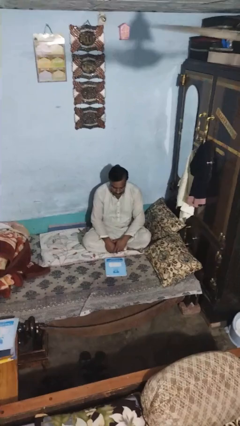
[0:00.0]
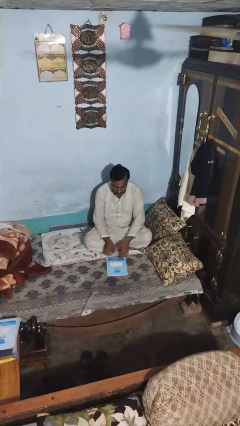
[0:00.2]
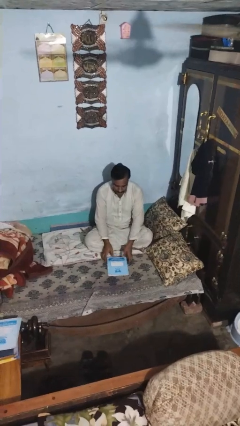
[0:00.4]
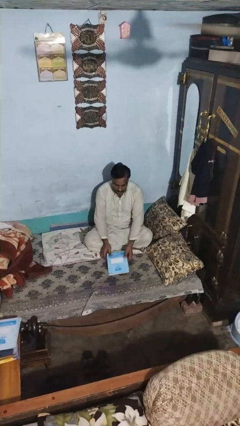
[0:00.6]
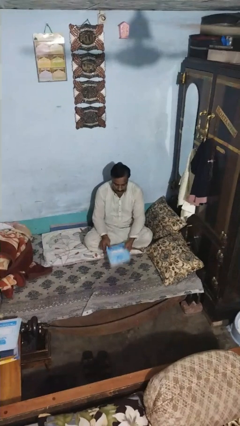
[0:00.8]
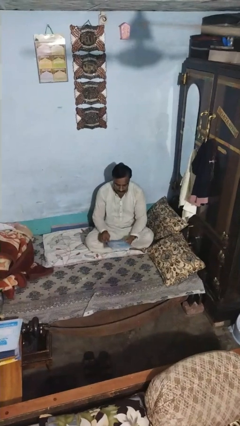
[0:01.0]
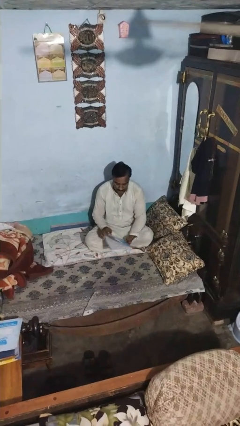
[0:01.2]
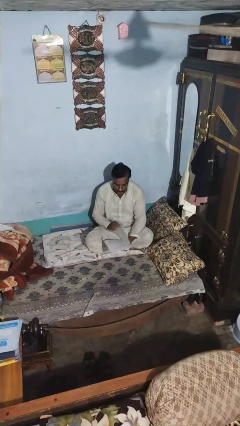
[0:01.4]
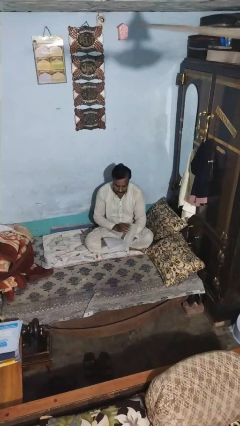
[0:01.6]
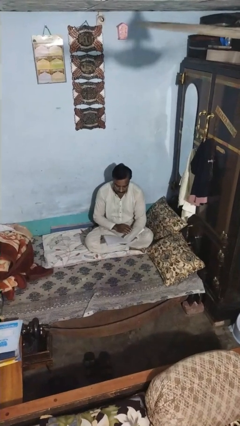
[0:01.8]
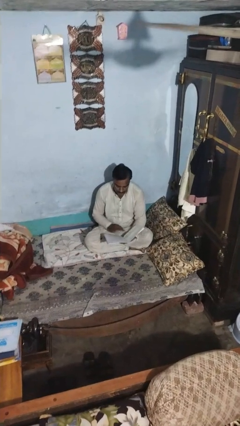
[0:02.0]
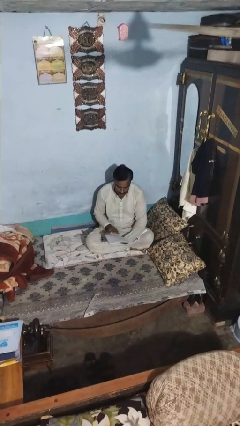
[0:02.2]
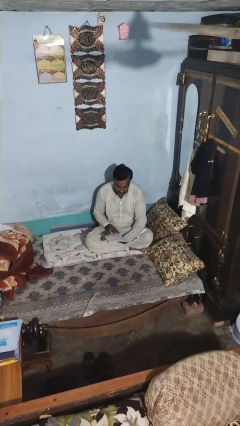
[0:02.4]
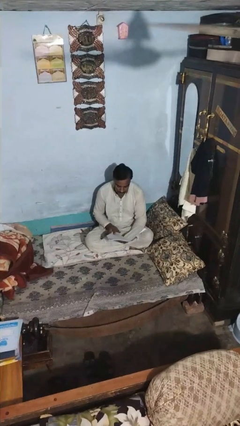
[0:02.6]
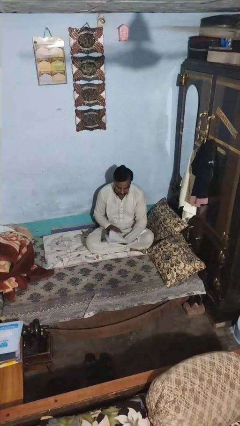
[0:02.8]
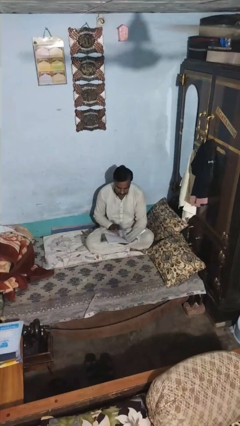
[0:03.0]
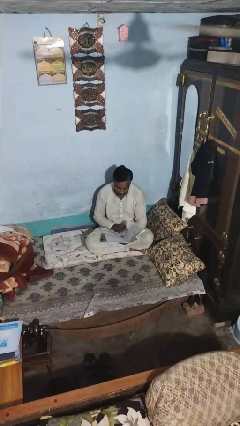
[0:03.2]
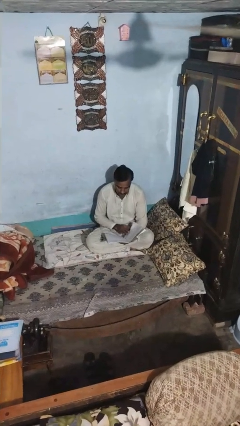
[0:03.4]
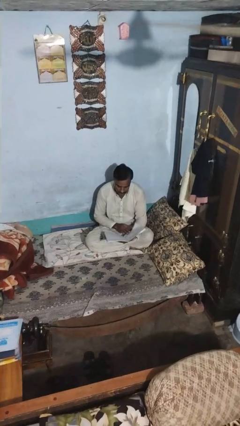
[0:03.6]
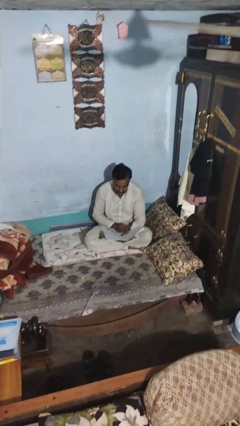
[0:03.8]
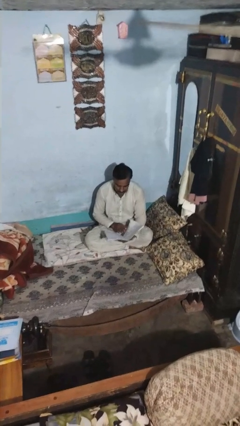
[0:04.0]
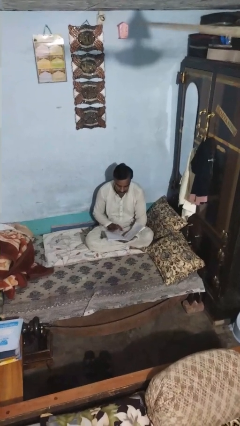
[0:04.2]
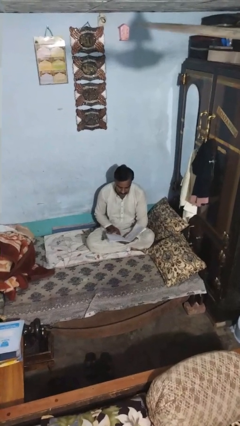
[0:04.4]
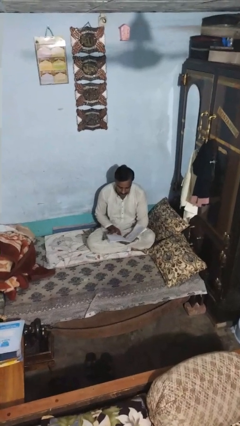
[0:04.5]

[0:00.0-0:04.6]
person reads book

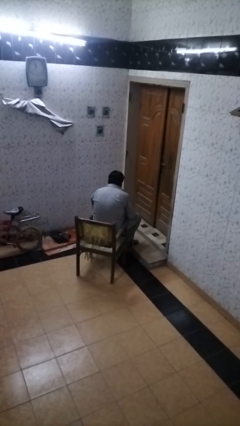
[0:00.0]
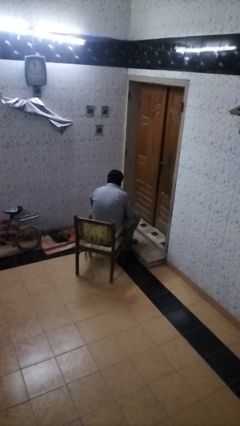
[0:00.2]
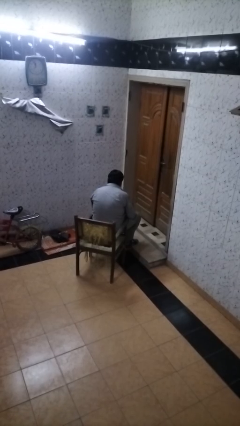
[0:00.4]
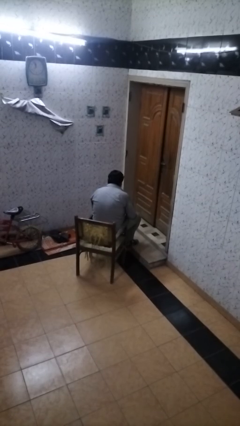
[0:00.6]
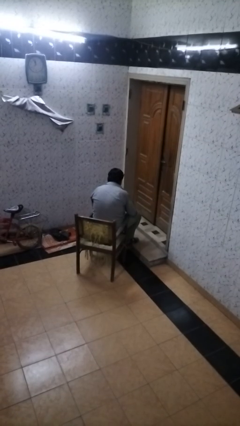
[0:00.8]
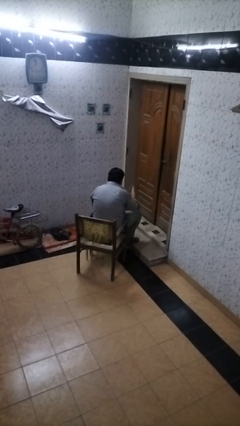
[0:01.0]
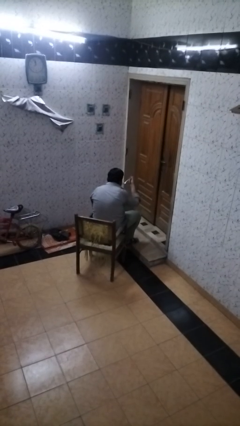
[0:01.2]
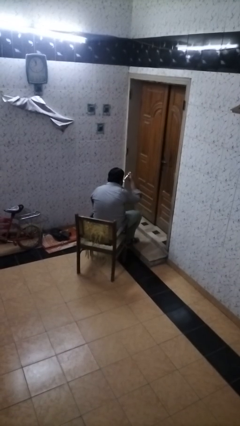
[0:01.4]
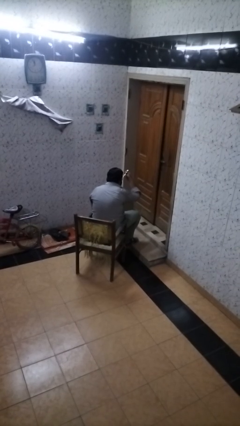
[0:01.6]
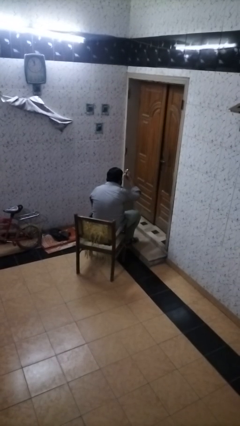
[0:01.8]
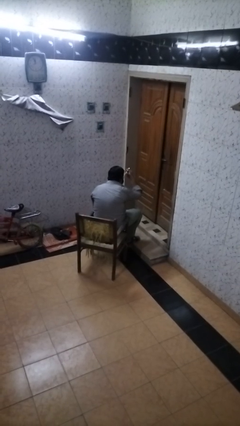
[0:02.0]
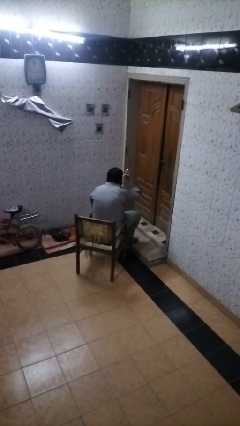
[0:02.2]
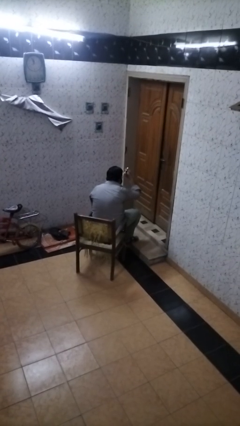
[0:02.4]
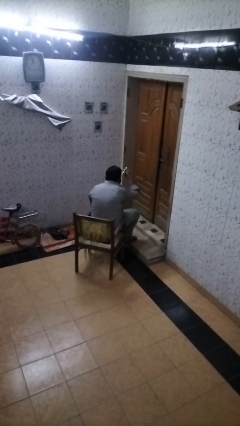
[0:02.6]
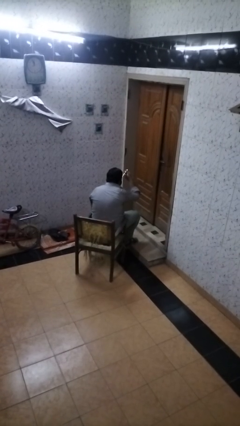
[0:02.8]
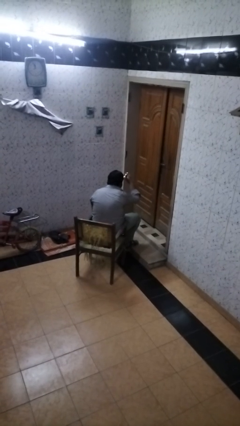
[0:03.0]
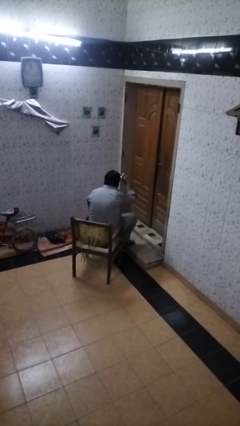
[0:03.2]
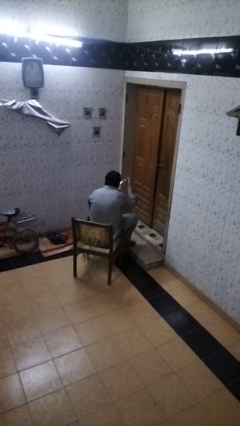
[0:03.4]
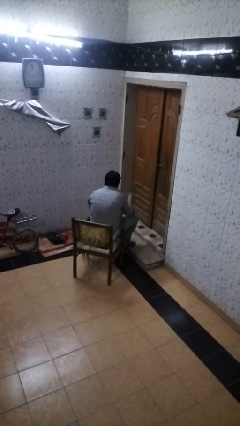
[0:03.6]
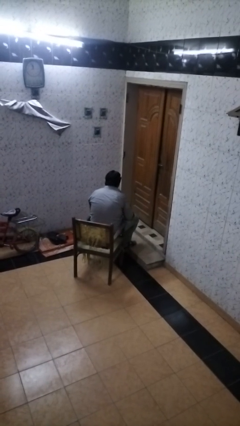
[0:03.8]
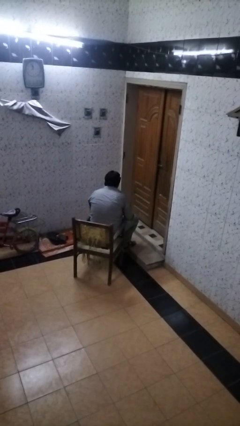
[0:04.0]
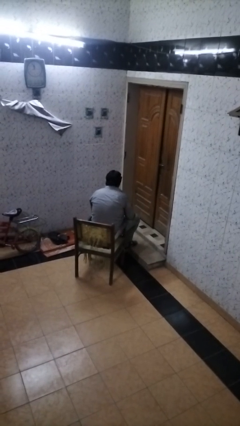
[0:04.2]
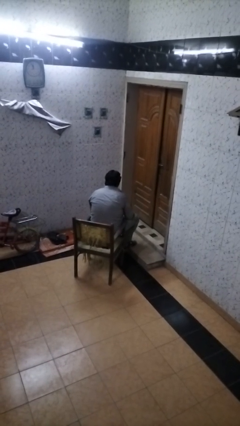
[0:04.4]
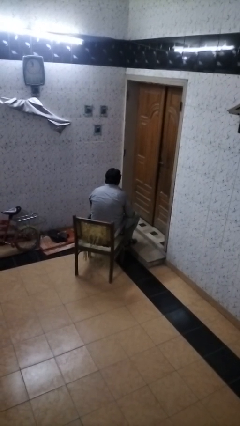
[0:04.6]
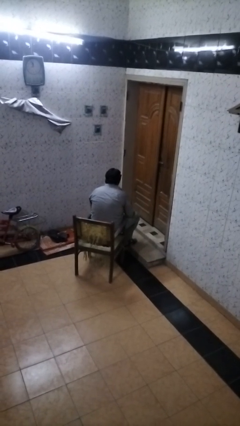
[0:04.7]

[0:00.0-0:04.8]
person eats with utensil

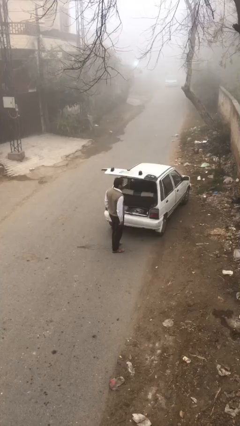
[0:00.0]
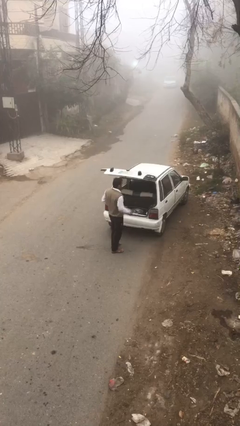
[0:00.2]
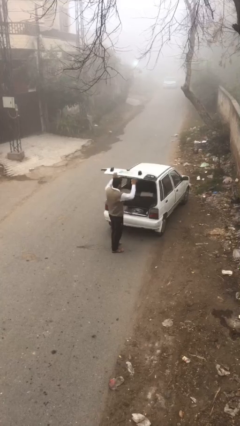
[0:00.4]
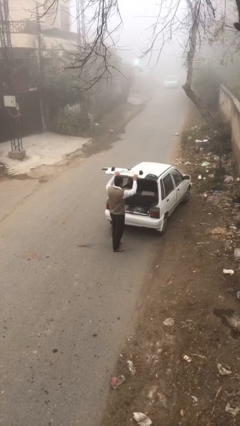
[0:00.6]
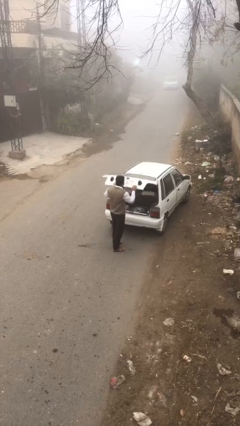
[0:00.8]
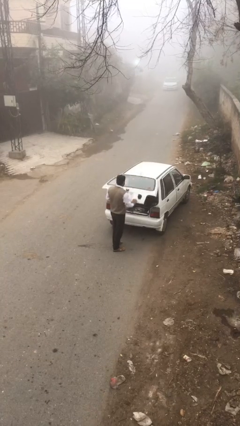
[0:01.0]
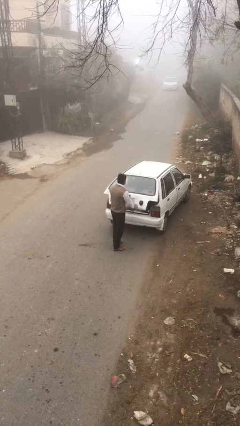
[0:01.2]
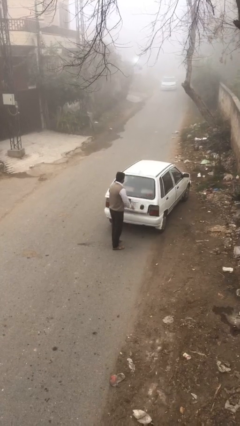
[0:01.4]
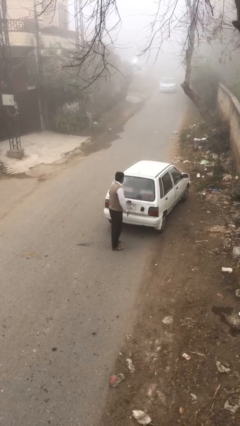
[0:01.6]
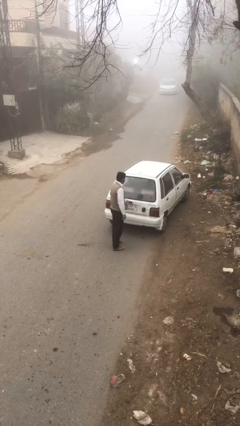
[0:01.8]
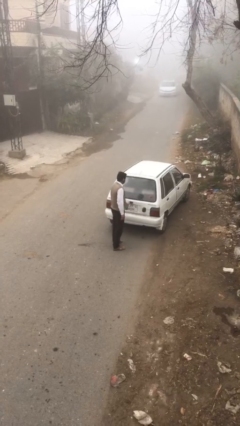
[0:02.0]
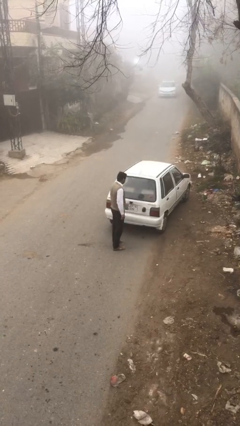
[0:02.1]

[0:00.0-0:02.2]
person closes car trunk

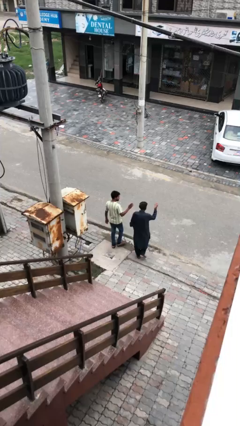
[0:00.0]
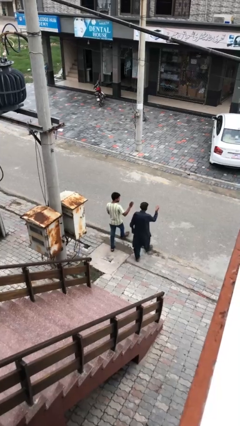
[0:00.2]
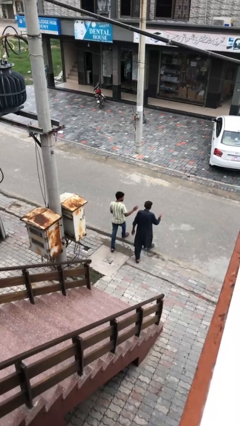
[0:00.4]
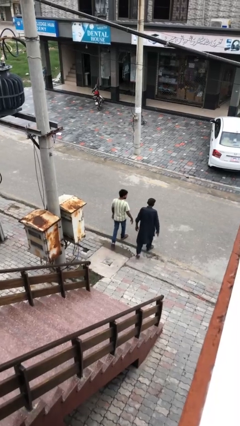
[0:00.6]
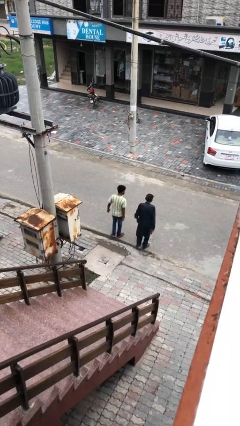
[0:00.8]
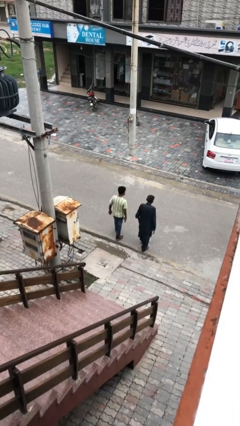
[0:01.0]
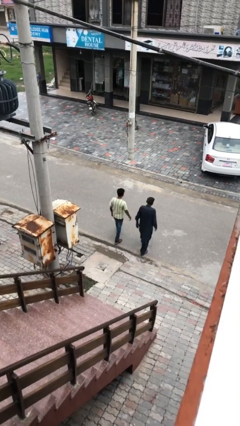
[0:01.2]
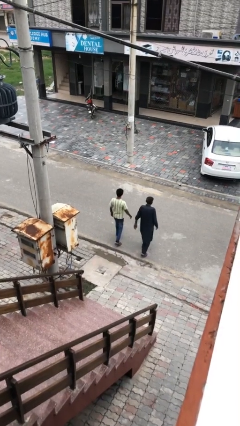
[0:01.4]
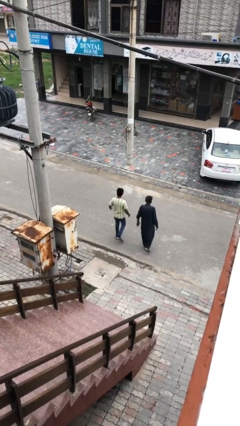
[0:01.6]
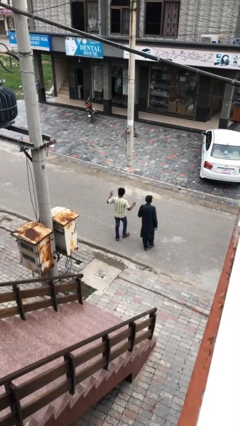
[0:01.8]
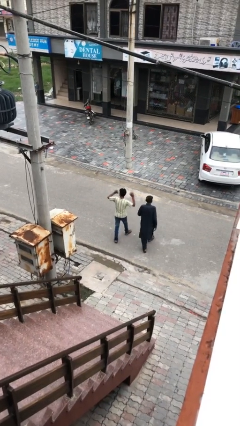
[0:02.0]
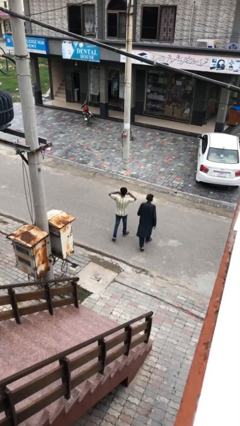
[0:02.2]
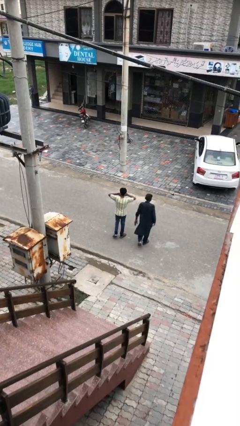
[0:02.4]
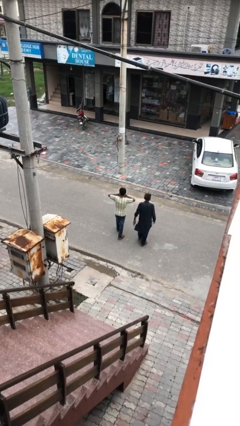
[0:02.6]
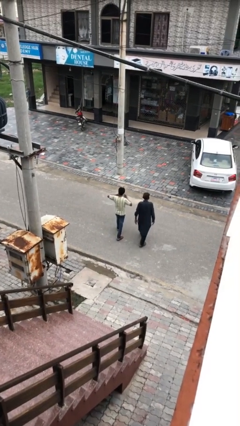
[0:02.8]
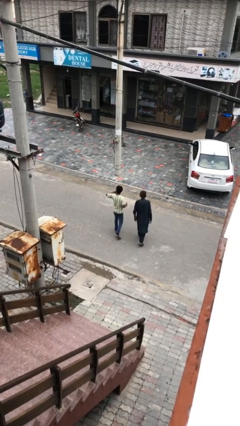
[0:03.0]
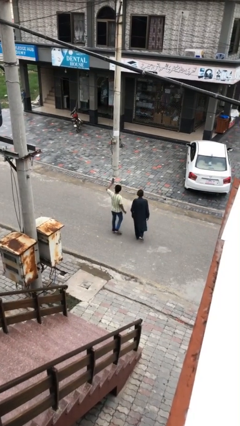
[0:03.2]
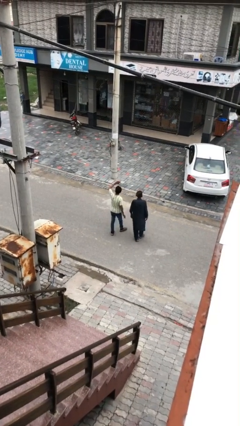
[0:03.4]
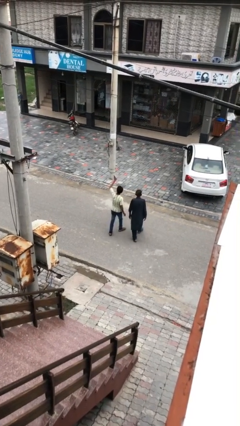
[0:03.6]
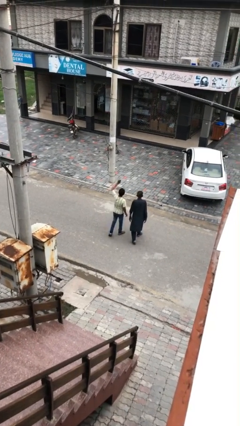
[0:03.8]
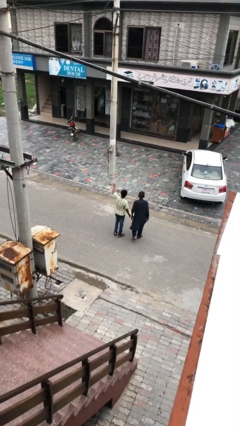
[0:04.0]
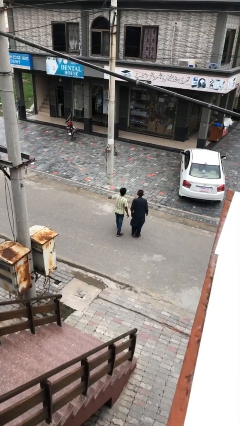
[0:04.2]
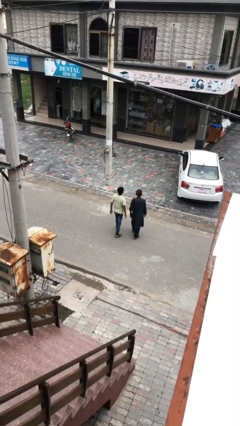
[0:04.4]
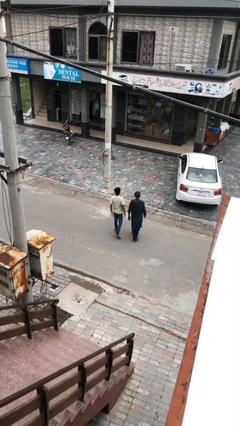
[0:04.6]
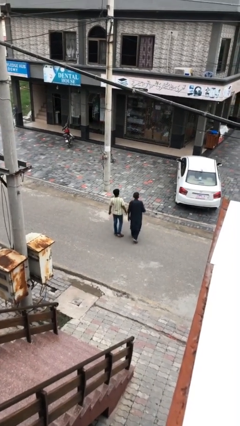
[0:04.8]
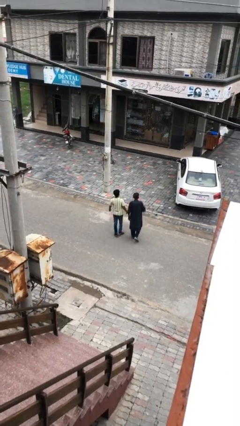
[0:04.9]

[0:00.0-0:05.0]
person talks to person

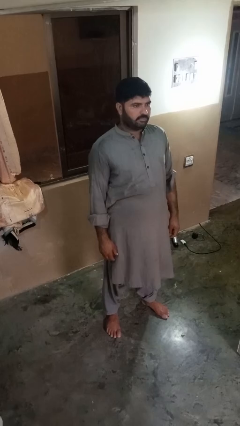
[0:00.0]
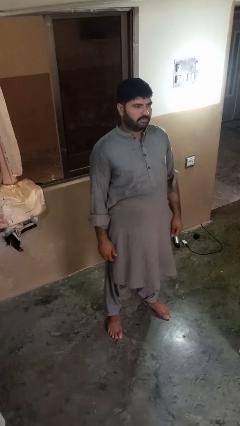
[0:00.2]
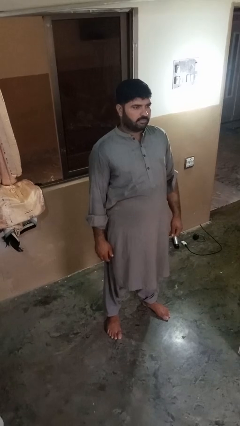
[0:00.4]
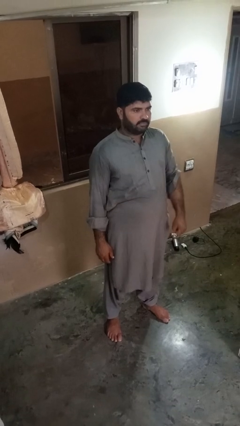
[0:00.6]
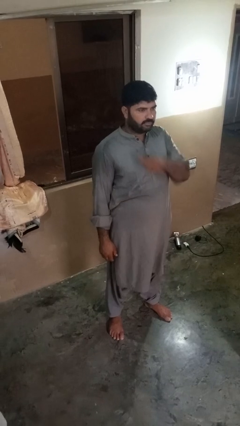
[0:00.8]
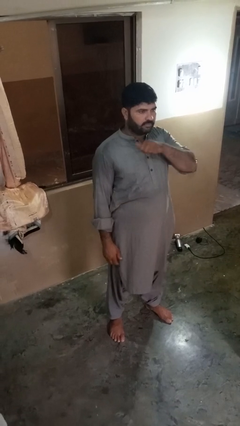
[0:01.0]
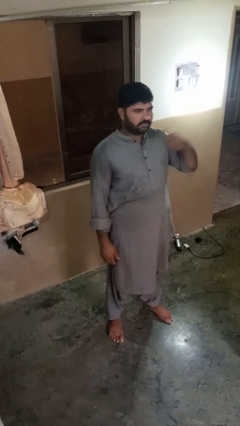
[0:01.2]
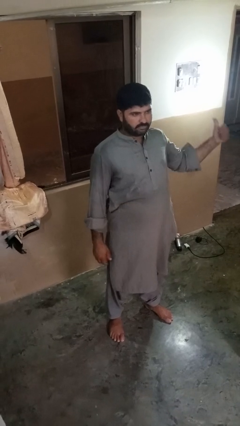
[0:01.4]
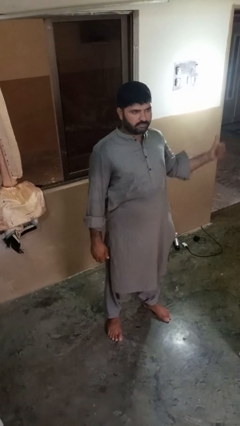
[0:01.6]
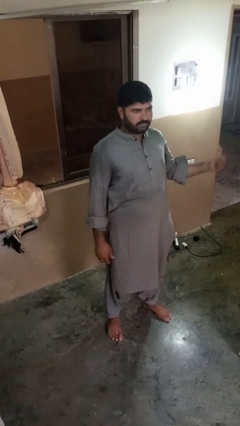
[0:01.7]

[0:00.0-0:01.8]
person gestures cut
